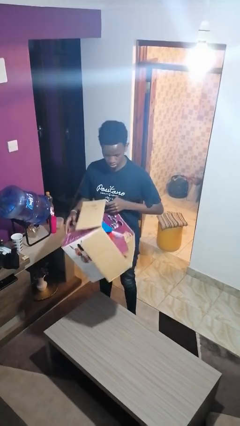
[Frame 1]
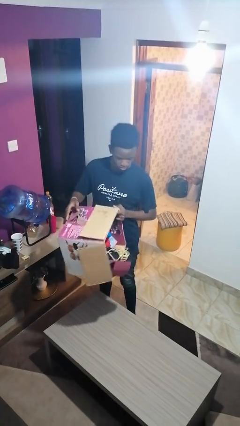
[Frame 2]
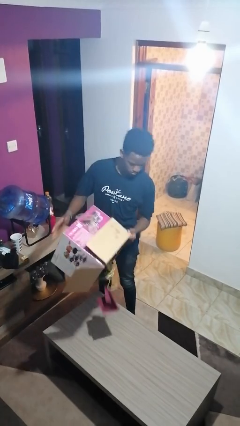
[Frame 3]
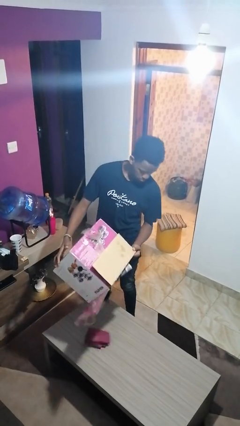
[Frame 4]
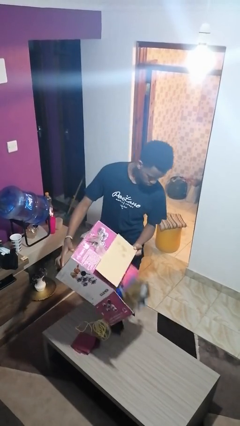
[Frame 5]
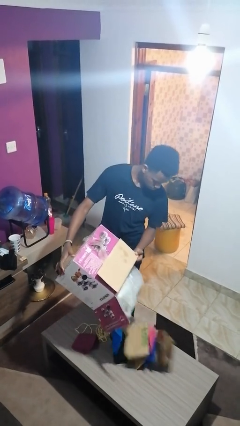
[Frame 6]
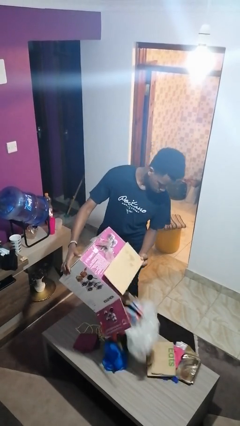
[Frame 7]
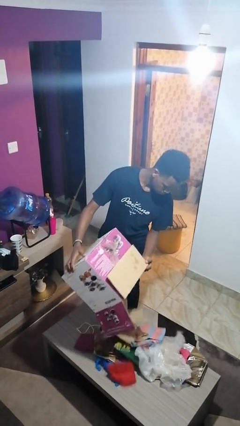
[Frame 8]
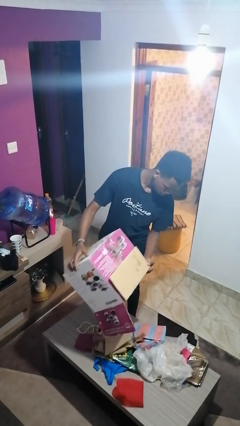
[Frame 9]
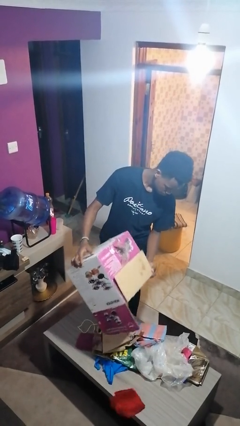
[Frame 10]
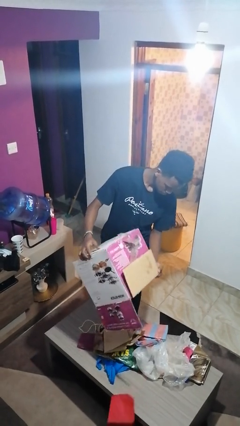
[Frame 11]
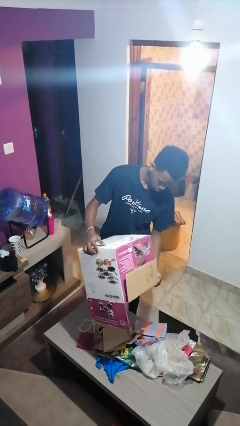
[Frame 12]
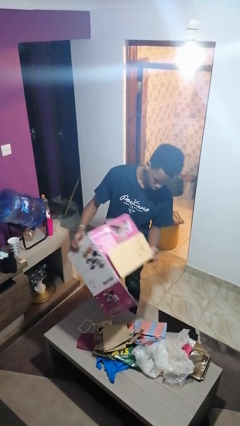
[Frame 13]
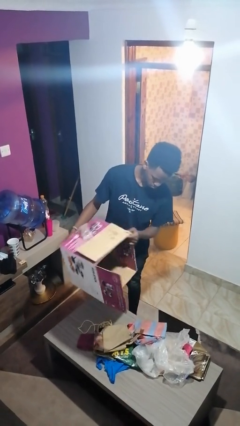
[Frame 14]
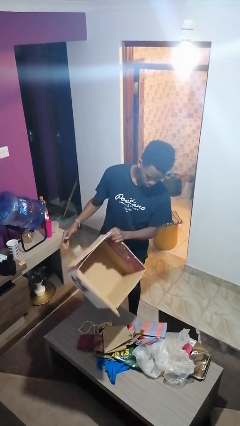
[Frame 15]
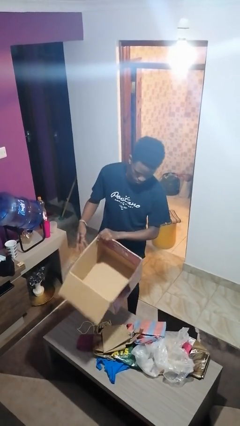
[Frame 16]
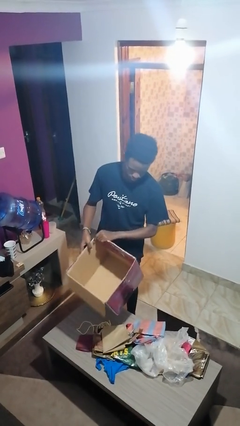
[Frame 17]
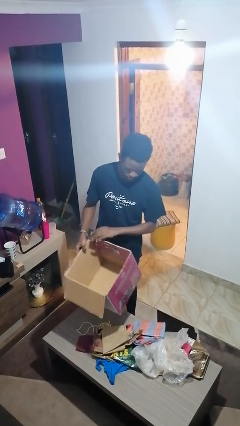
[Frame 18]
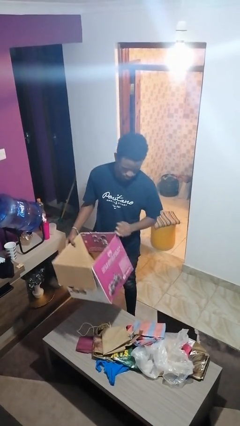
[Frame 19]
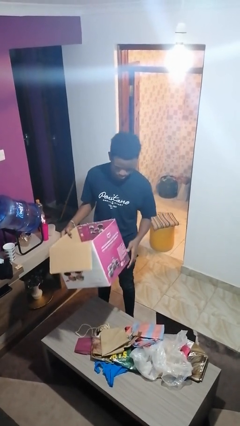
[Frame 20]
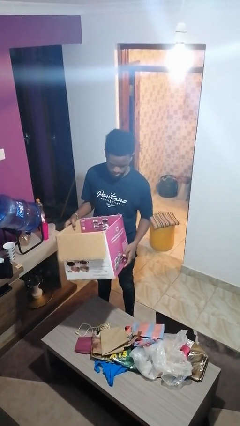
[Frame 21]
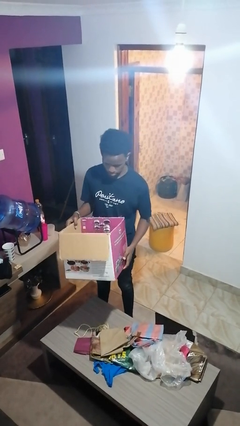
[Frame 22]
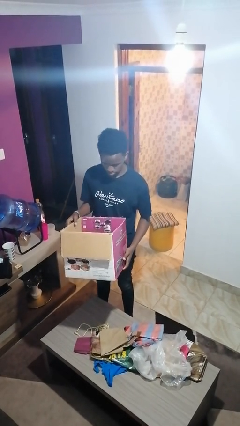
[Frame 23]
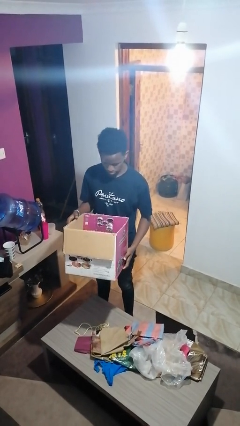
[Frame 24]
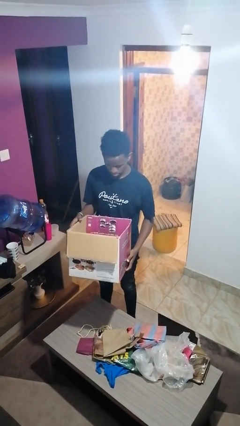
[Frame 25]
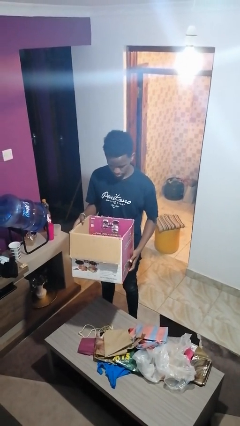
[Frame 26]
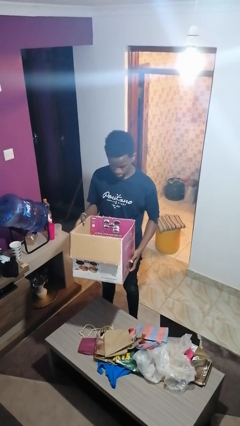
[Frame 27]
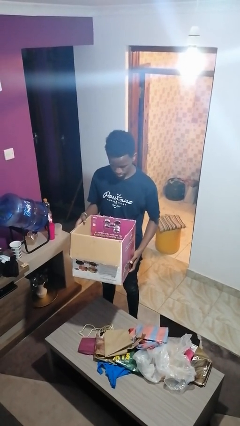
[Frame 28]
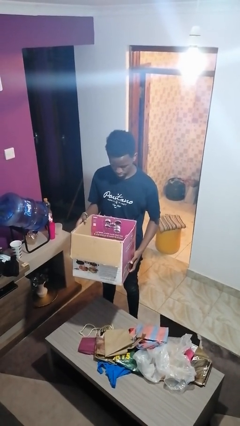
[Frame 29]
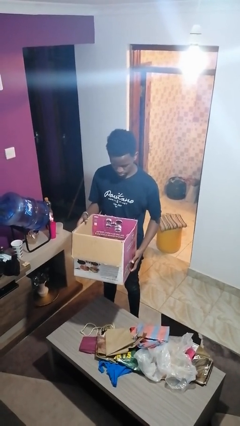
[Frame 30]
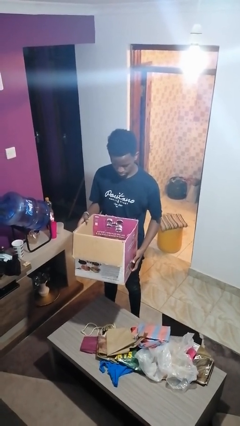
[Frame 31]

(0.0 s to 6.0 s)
person unloads box onto table

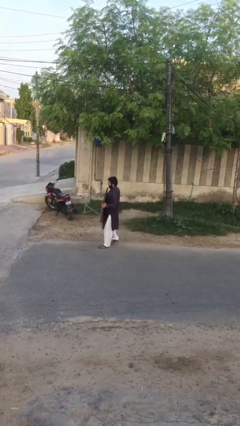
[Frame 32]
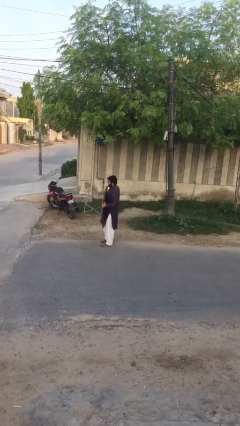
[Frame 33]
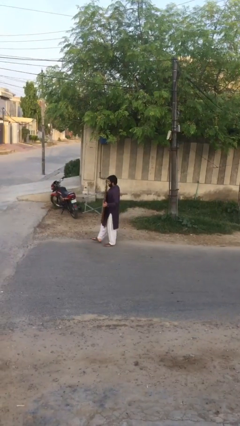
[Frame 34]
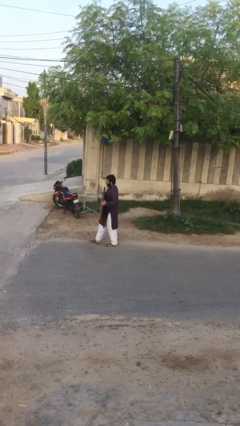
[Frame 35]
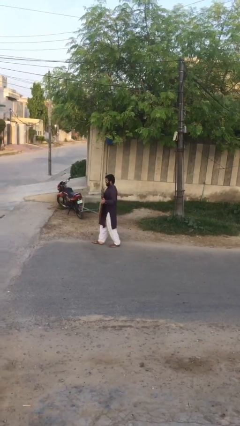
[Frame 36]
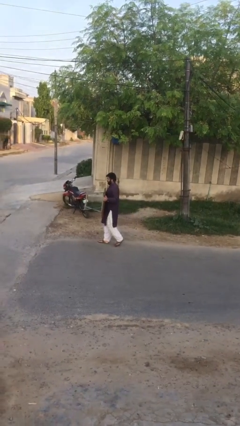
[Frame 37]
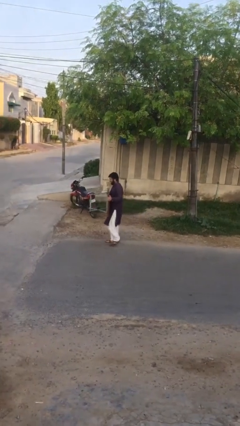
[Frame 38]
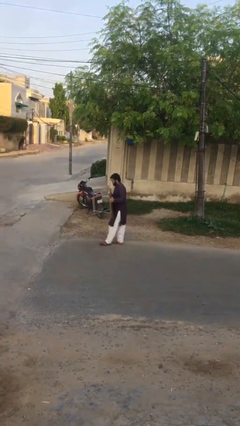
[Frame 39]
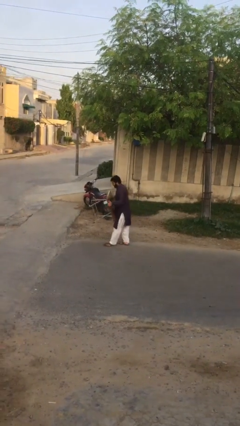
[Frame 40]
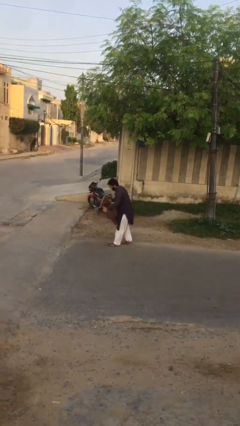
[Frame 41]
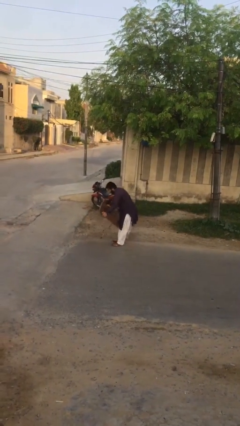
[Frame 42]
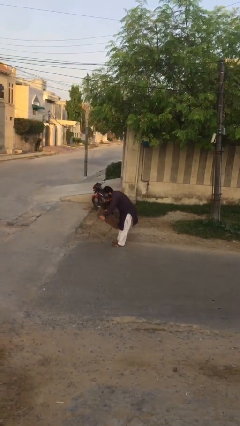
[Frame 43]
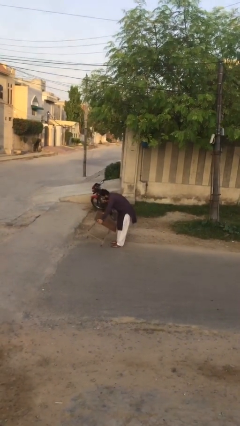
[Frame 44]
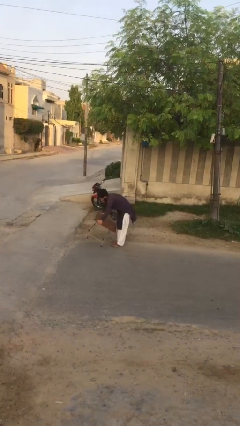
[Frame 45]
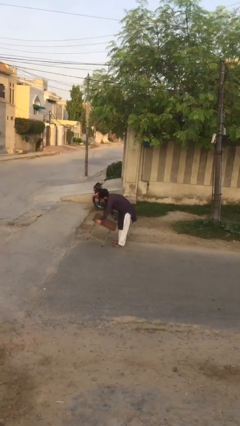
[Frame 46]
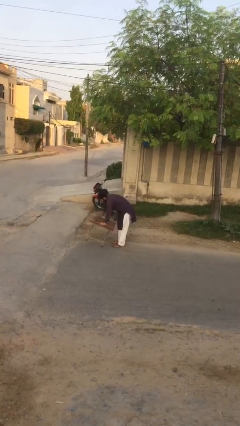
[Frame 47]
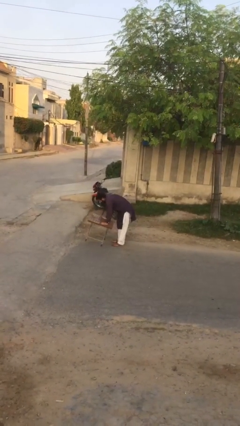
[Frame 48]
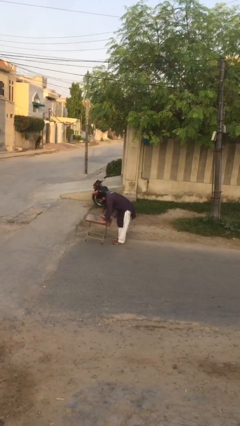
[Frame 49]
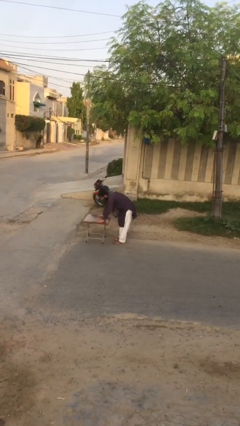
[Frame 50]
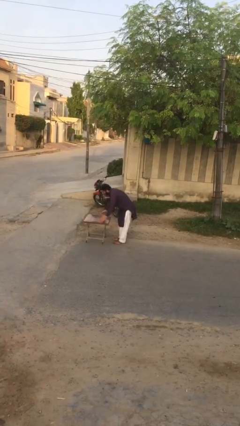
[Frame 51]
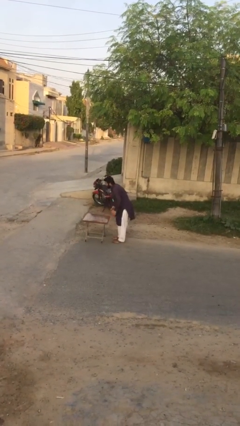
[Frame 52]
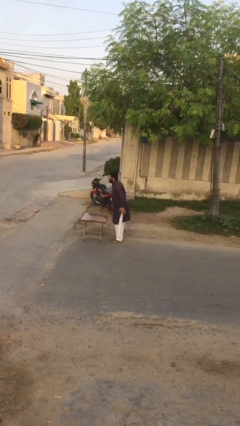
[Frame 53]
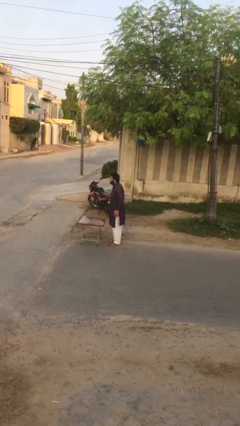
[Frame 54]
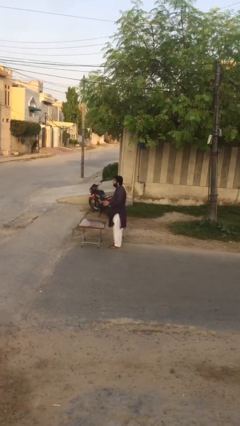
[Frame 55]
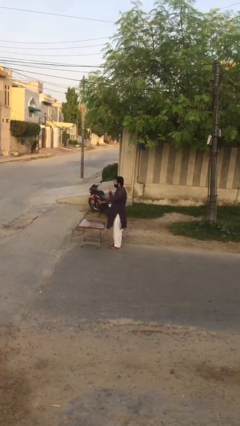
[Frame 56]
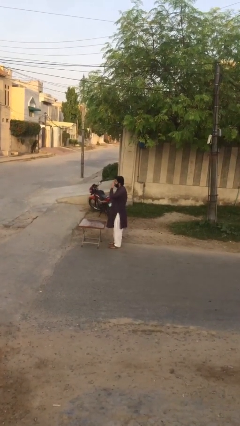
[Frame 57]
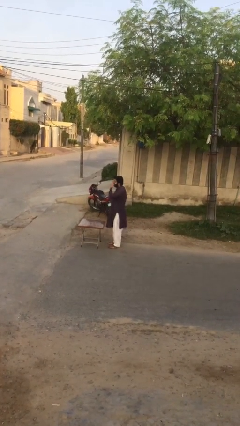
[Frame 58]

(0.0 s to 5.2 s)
person puts down object on floor

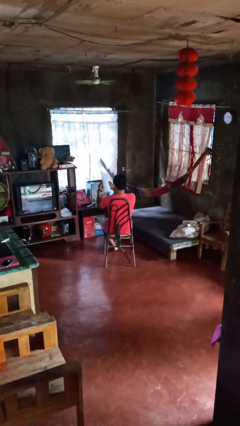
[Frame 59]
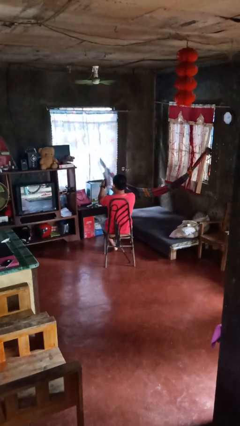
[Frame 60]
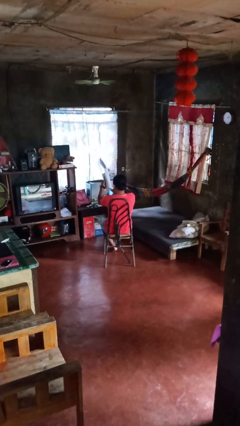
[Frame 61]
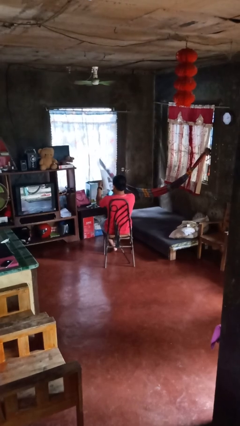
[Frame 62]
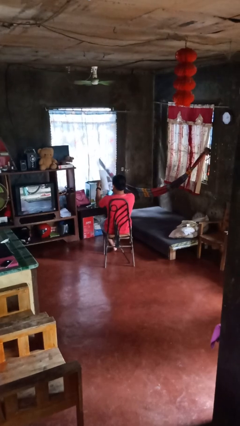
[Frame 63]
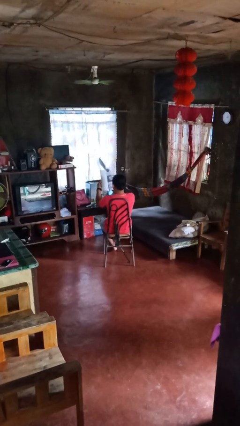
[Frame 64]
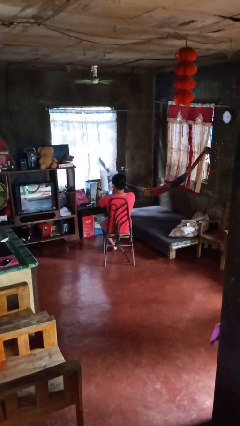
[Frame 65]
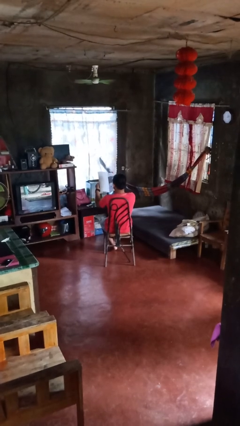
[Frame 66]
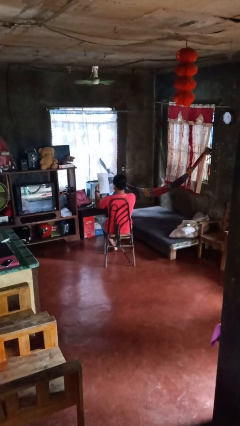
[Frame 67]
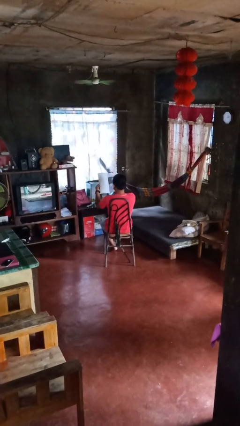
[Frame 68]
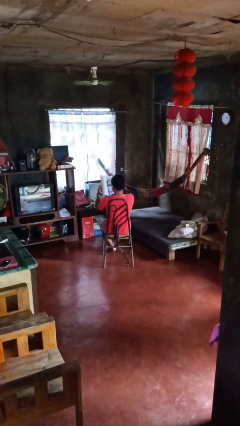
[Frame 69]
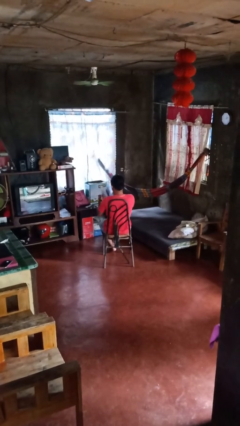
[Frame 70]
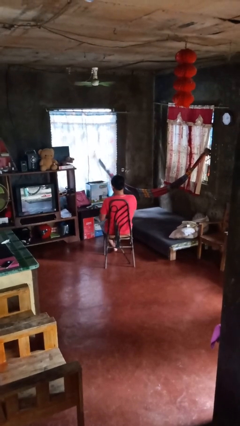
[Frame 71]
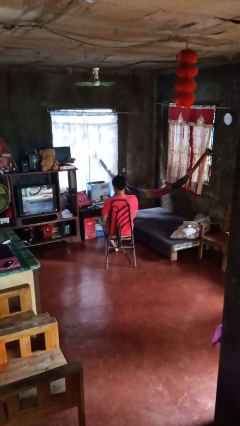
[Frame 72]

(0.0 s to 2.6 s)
person reads newspaper

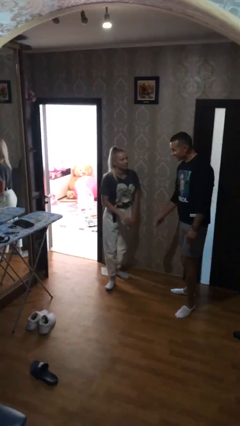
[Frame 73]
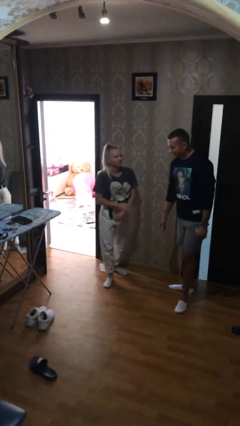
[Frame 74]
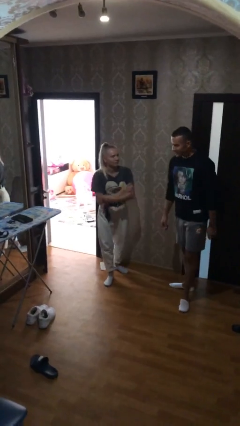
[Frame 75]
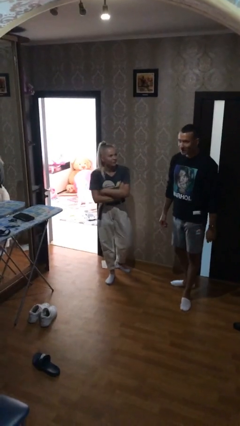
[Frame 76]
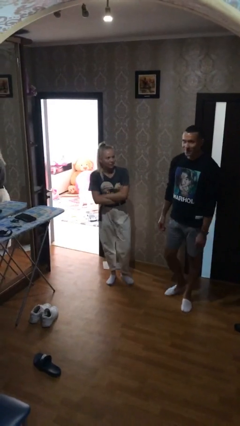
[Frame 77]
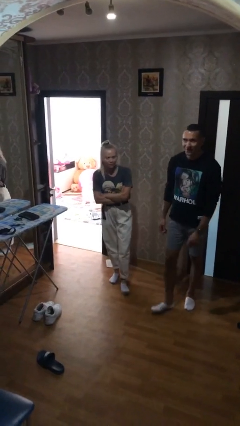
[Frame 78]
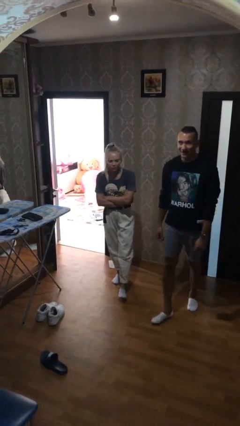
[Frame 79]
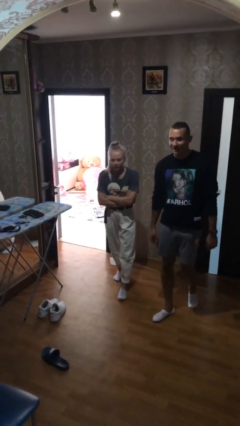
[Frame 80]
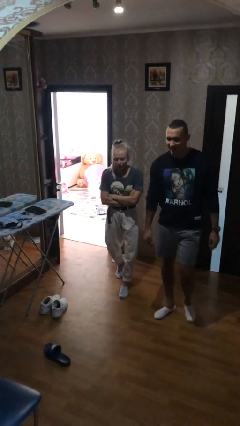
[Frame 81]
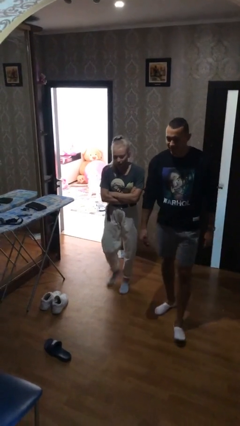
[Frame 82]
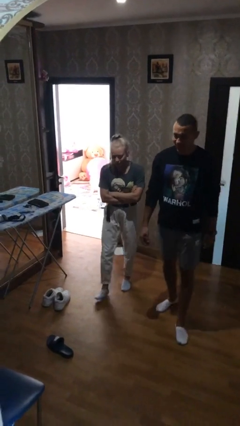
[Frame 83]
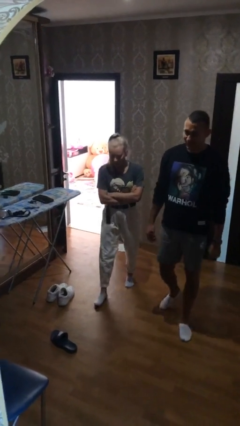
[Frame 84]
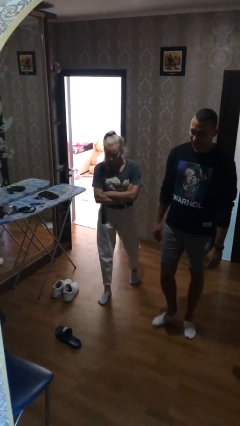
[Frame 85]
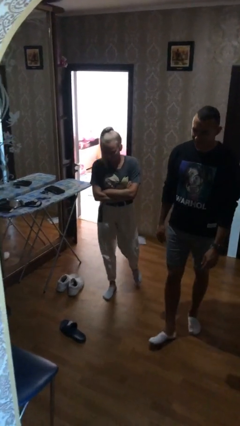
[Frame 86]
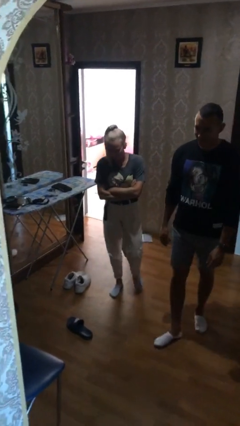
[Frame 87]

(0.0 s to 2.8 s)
person talks to person

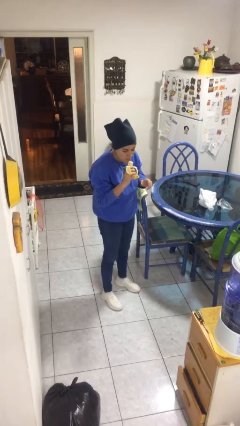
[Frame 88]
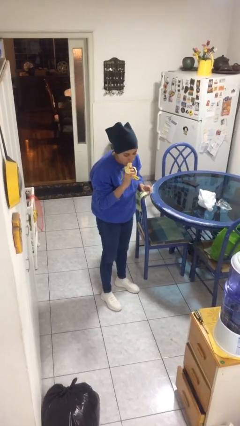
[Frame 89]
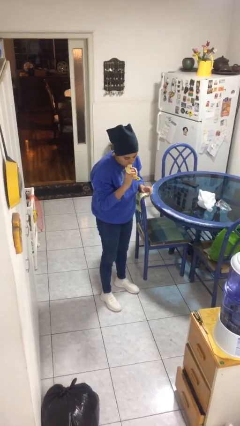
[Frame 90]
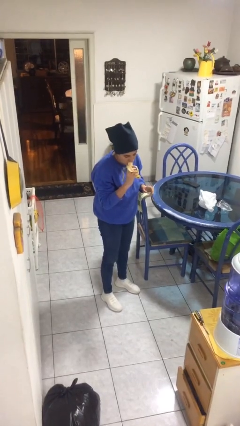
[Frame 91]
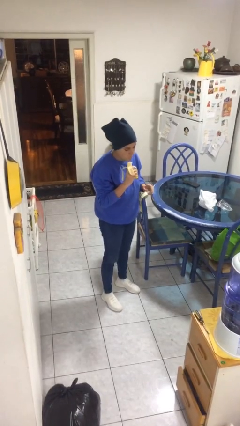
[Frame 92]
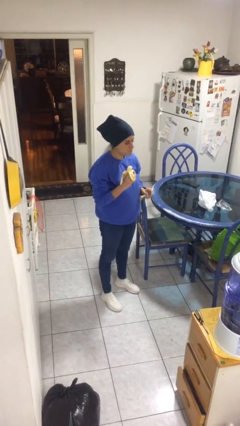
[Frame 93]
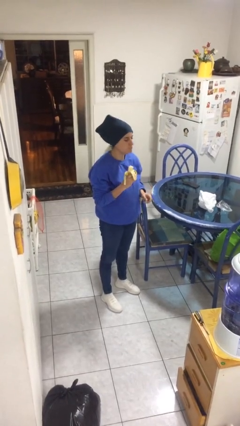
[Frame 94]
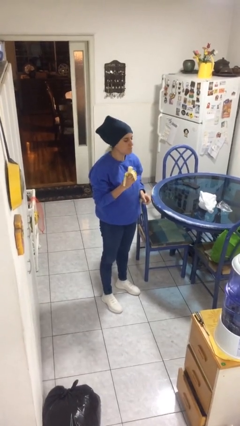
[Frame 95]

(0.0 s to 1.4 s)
person eats banana
